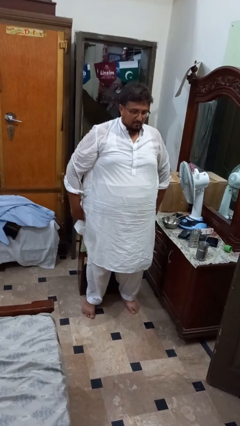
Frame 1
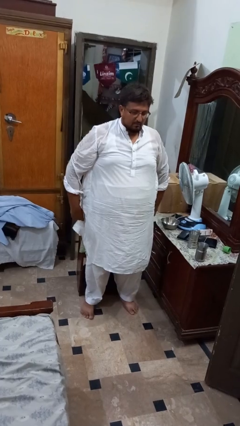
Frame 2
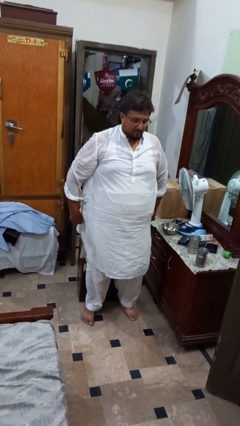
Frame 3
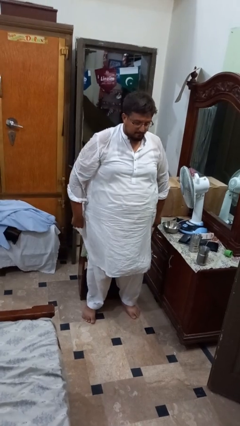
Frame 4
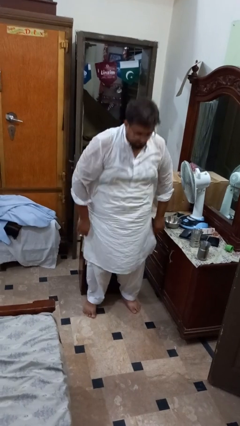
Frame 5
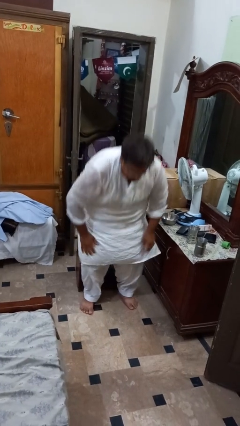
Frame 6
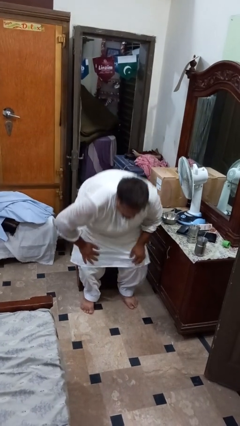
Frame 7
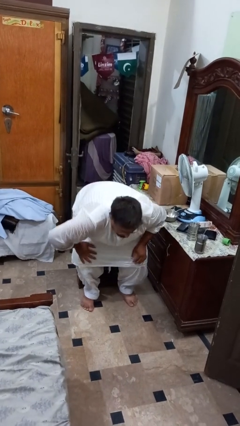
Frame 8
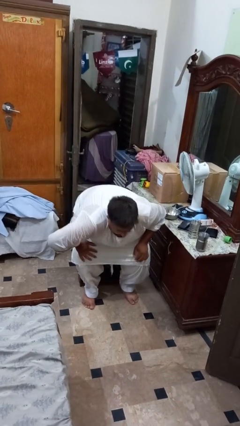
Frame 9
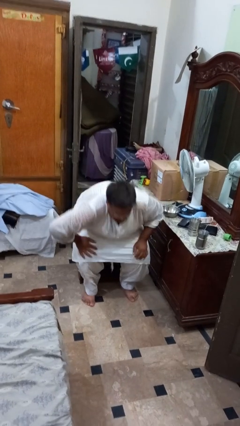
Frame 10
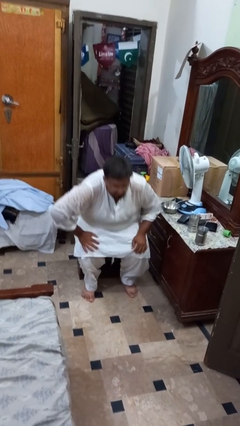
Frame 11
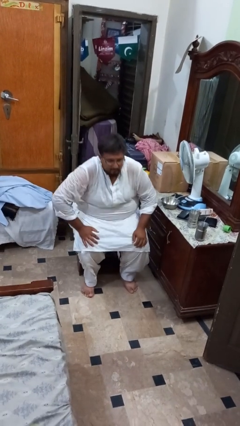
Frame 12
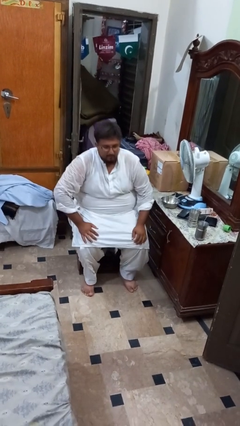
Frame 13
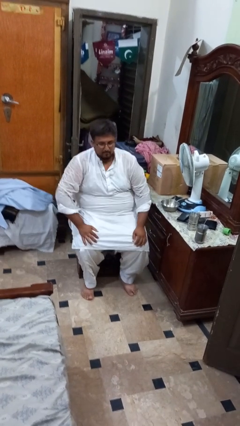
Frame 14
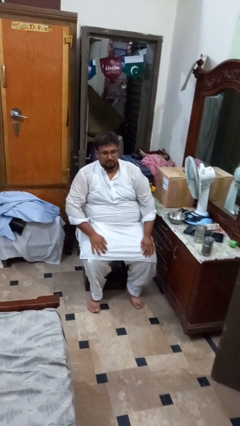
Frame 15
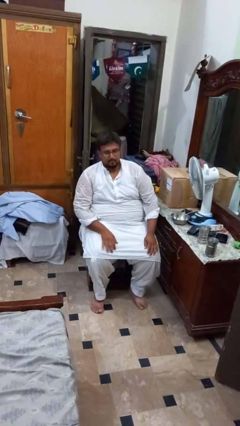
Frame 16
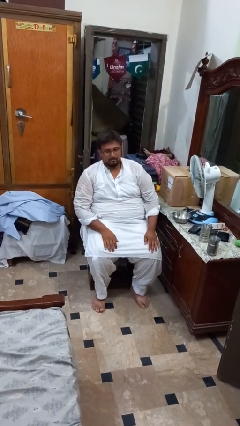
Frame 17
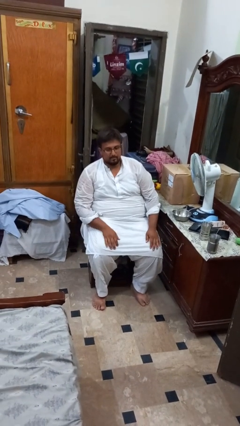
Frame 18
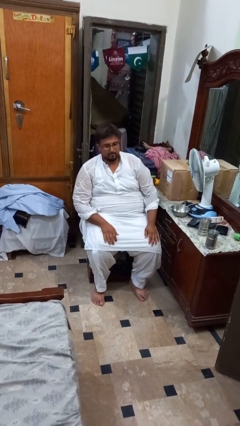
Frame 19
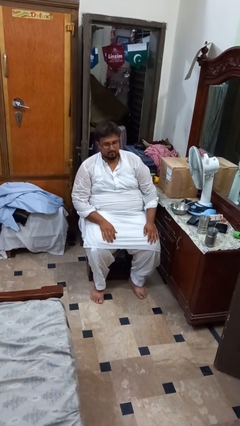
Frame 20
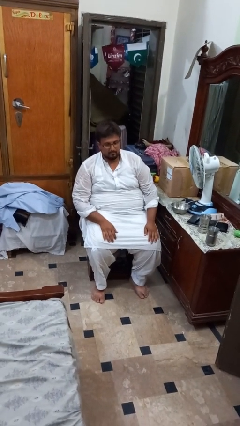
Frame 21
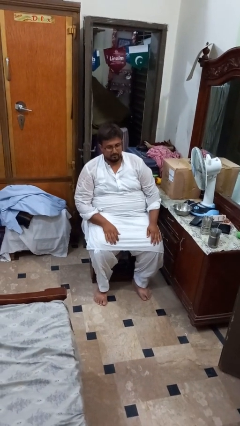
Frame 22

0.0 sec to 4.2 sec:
person sits down

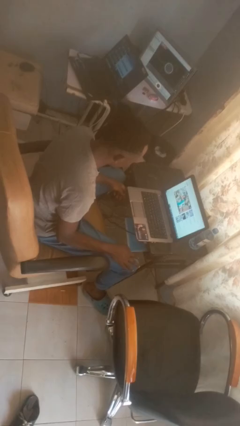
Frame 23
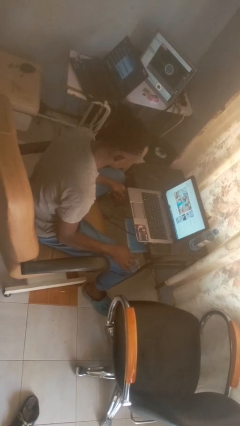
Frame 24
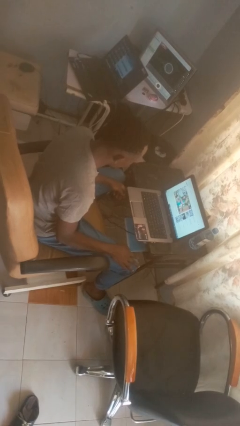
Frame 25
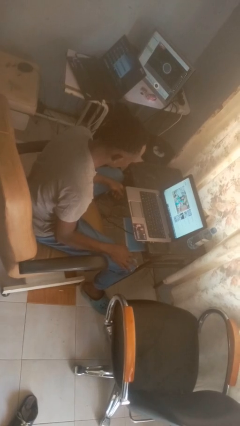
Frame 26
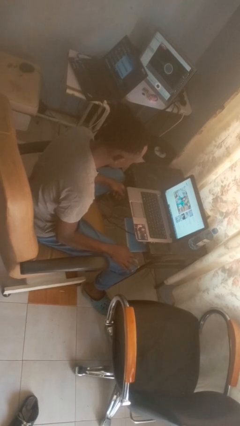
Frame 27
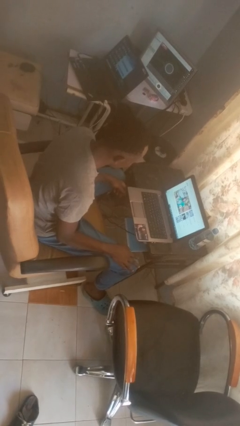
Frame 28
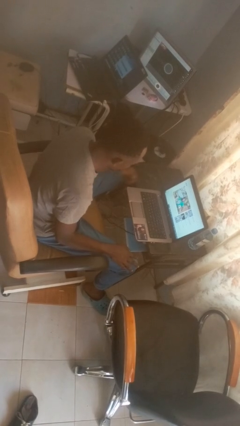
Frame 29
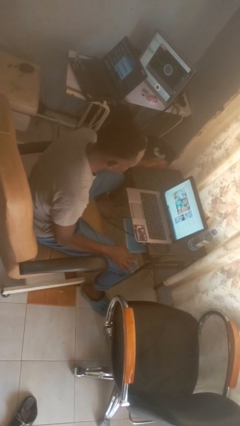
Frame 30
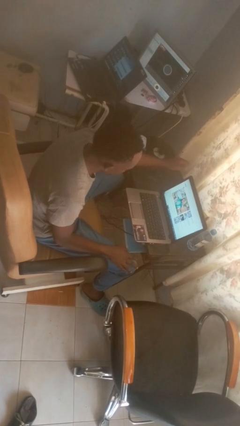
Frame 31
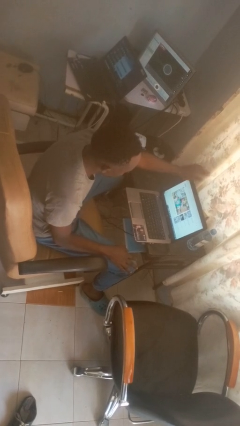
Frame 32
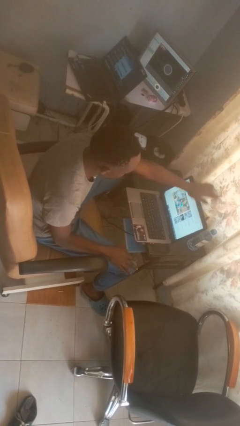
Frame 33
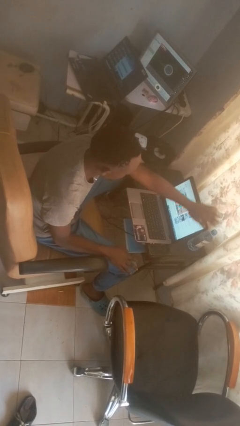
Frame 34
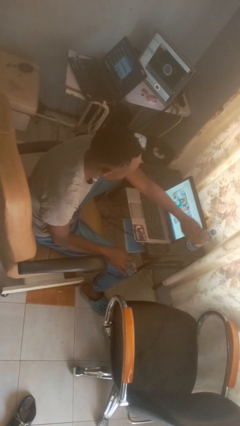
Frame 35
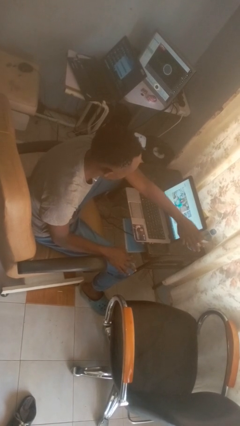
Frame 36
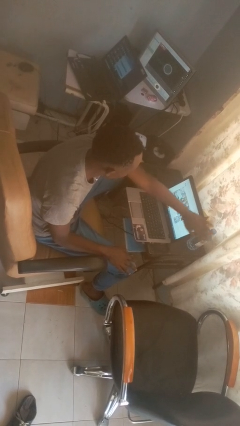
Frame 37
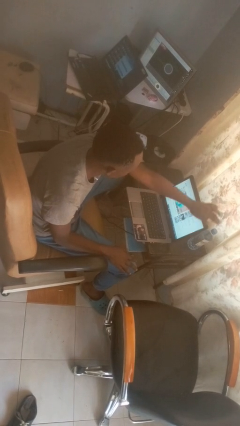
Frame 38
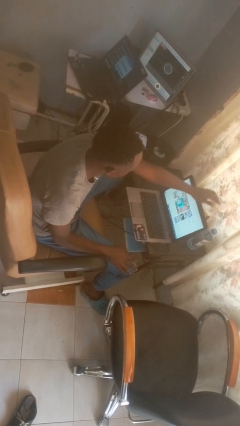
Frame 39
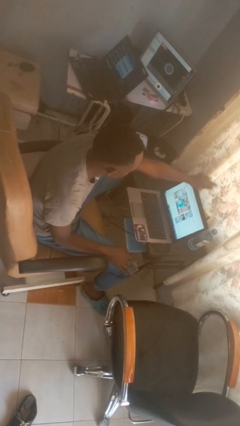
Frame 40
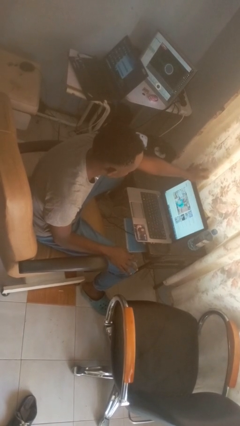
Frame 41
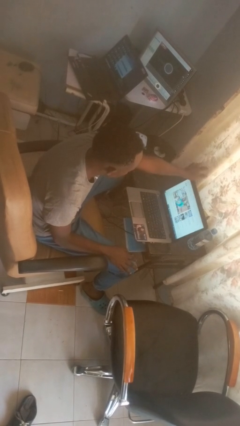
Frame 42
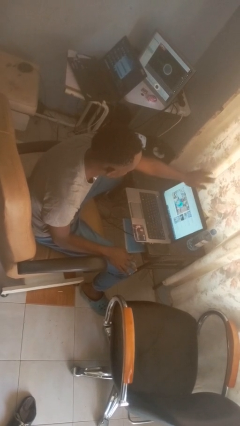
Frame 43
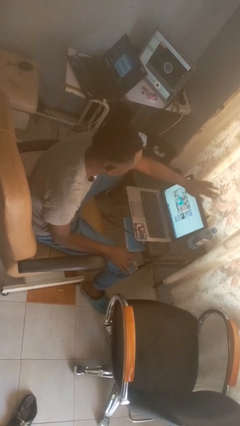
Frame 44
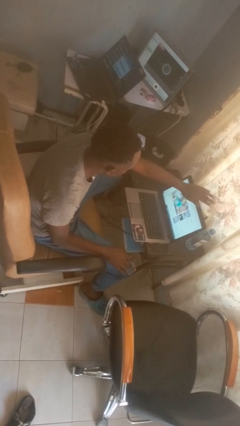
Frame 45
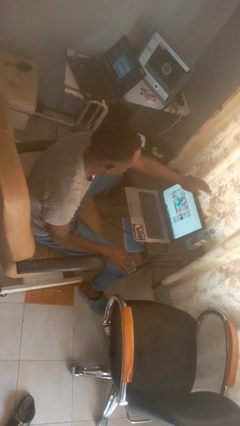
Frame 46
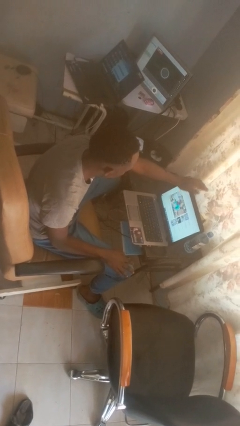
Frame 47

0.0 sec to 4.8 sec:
person waves hand over object

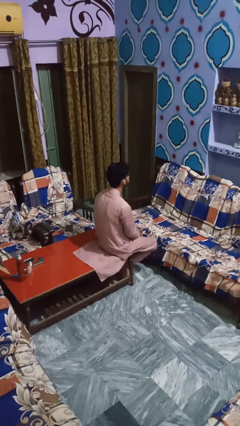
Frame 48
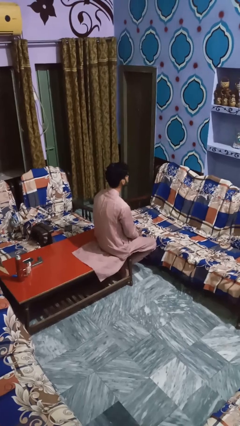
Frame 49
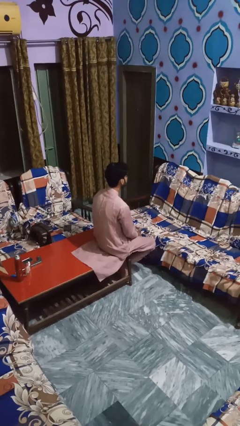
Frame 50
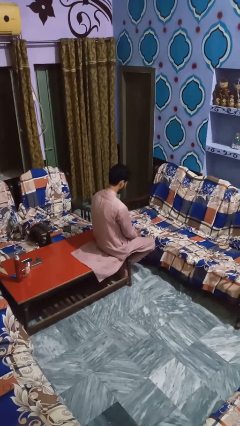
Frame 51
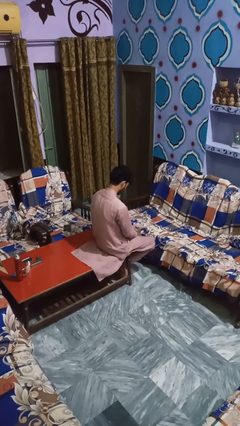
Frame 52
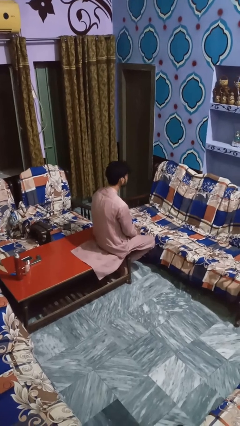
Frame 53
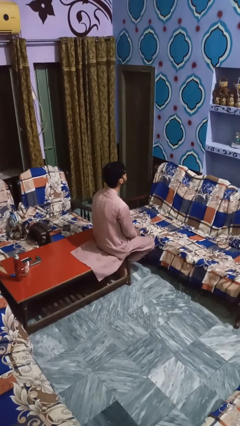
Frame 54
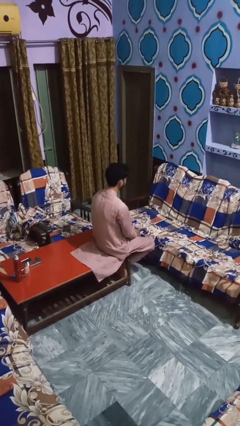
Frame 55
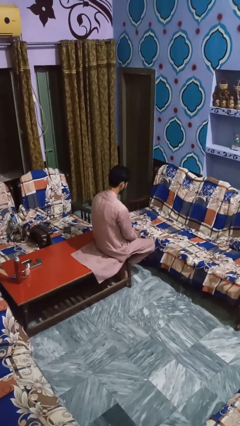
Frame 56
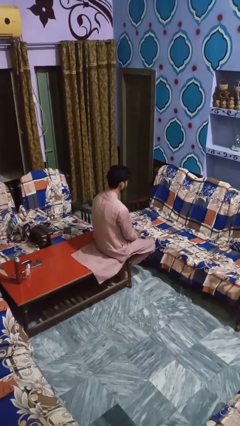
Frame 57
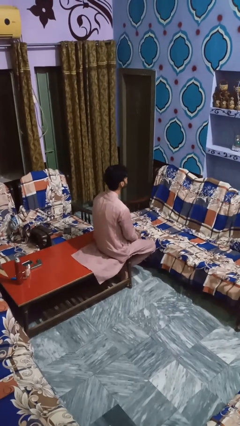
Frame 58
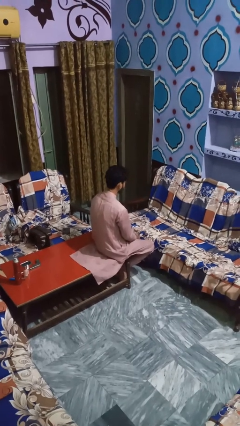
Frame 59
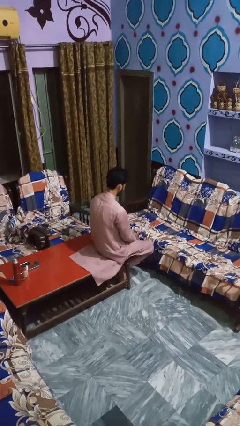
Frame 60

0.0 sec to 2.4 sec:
person nods head

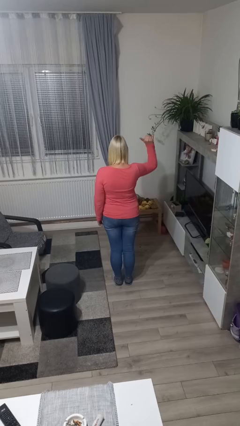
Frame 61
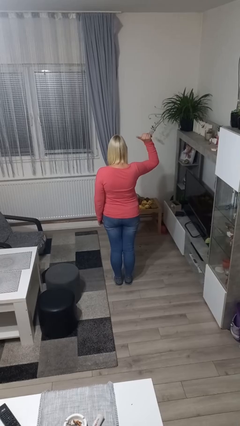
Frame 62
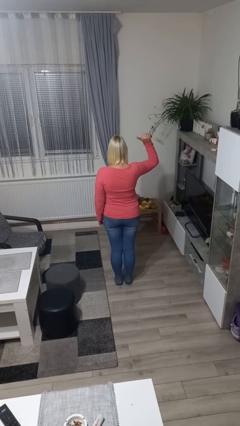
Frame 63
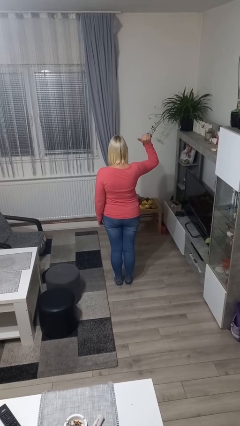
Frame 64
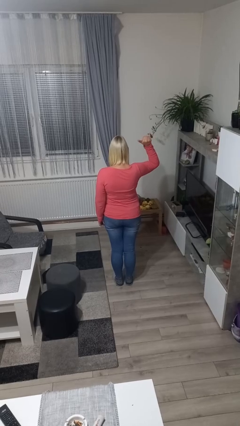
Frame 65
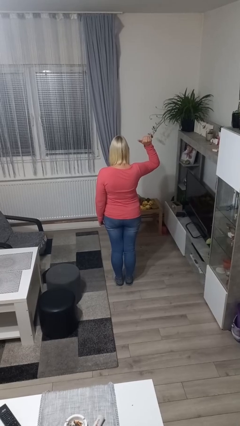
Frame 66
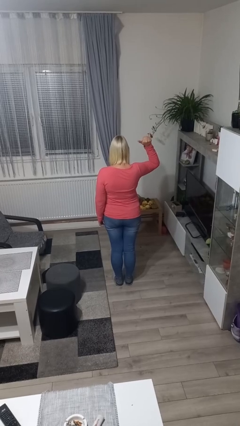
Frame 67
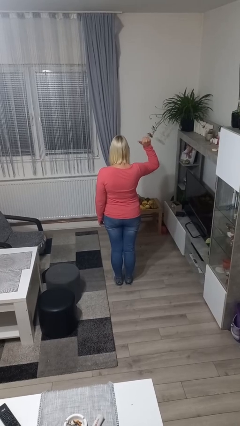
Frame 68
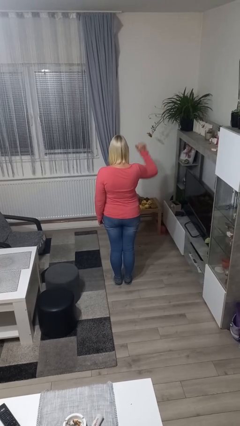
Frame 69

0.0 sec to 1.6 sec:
person gestures hang loose

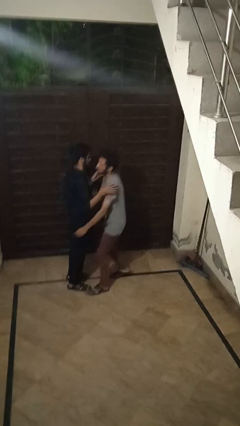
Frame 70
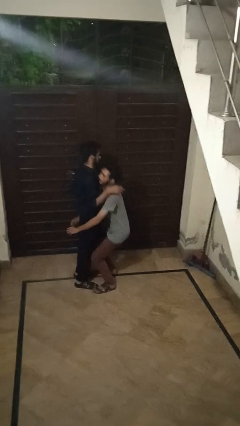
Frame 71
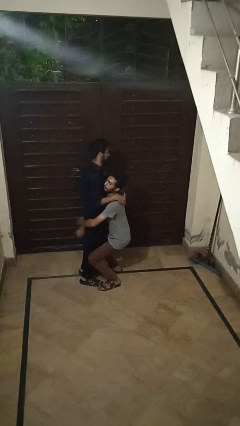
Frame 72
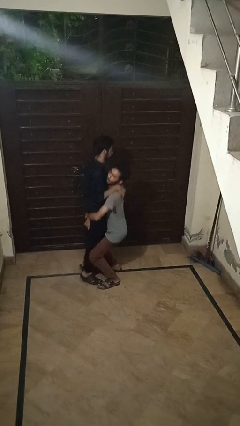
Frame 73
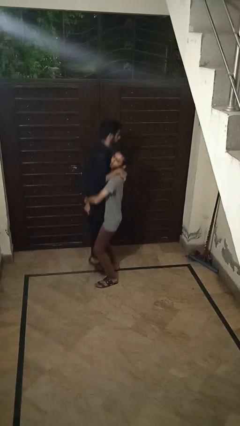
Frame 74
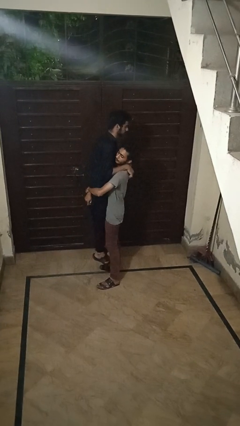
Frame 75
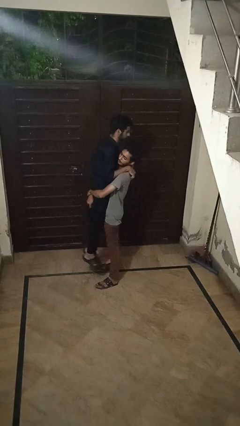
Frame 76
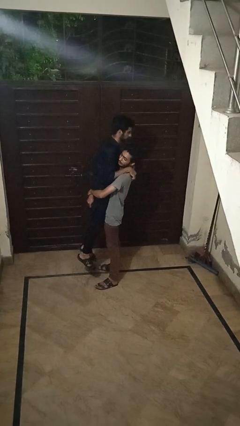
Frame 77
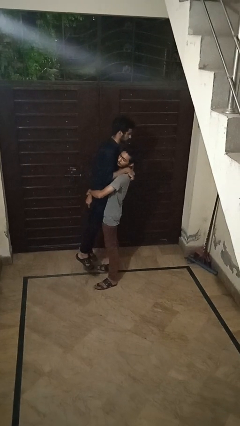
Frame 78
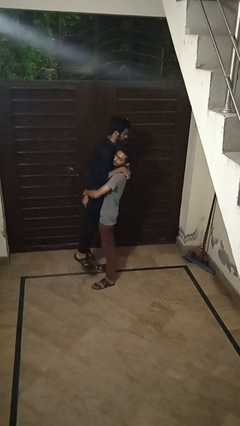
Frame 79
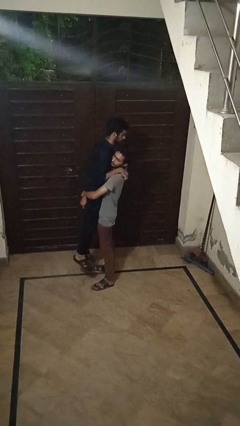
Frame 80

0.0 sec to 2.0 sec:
person picks up person

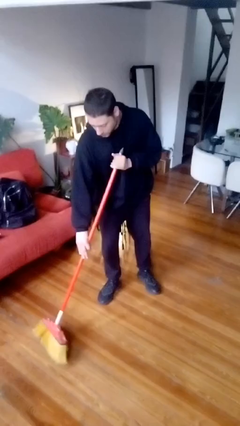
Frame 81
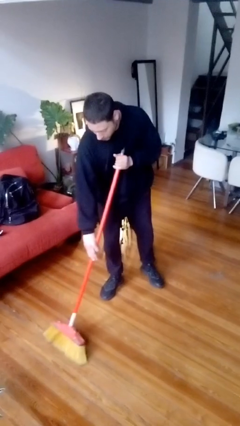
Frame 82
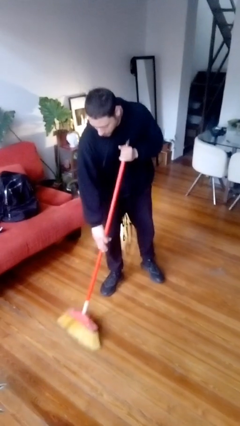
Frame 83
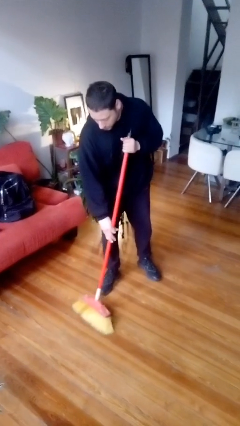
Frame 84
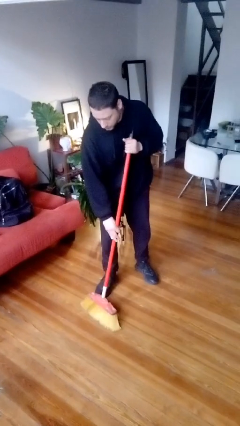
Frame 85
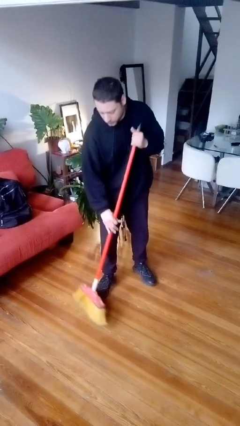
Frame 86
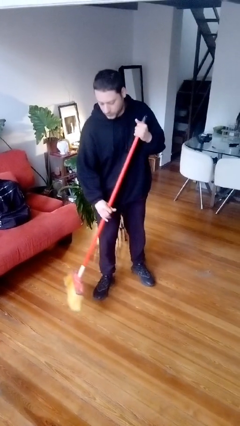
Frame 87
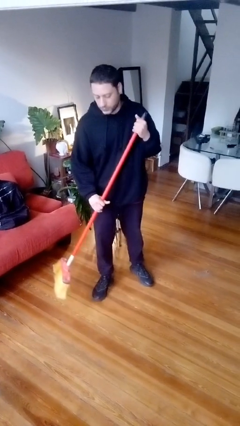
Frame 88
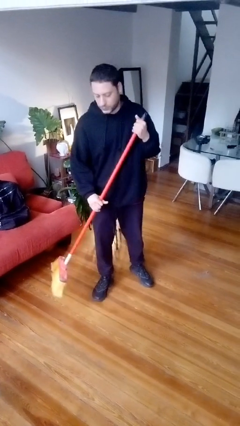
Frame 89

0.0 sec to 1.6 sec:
person sweeps floor

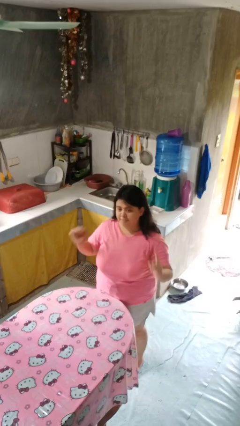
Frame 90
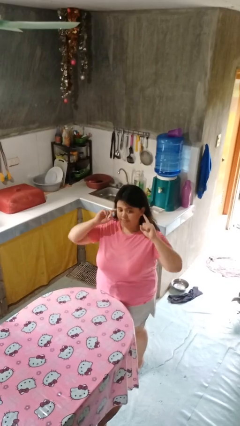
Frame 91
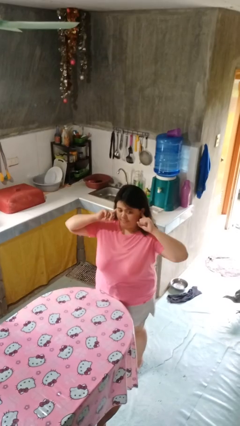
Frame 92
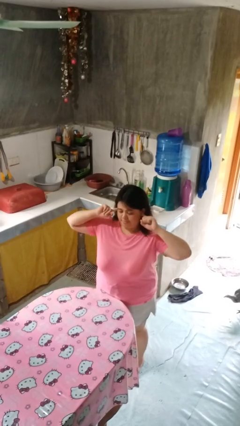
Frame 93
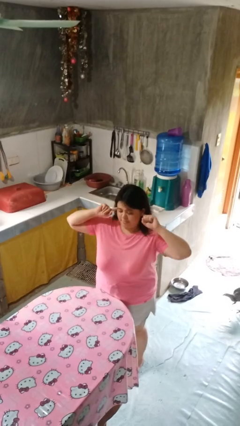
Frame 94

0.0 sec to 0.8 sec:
person puts fingers in ear
